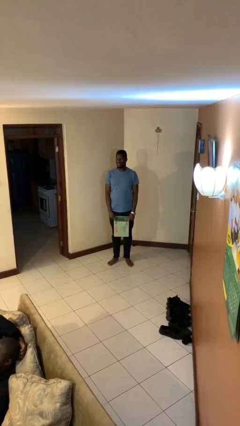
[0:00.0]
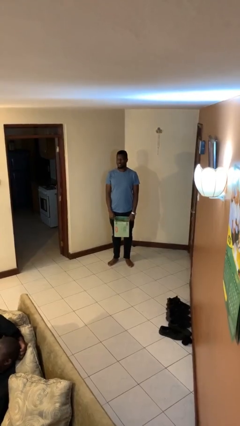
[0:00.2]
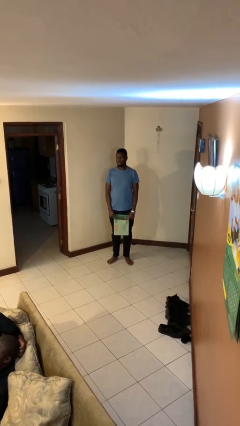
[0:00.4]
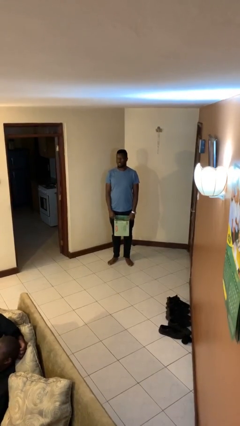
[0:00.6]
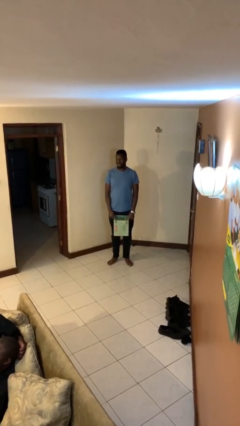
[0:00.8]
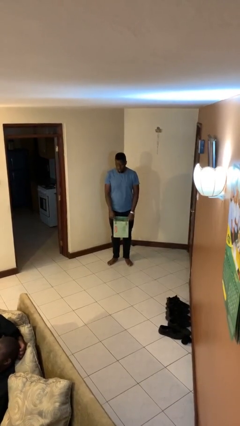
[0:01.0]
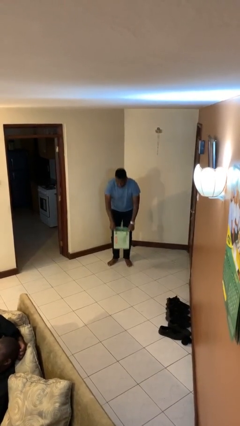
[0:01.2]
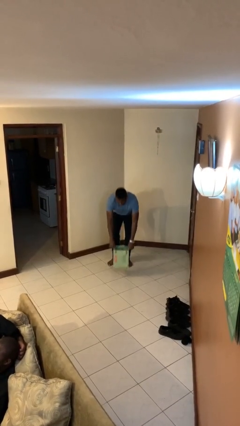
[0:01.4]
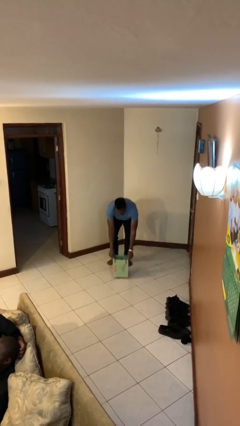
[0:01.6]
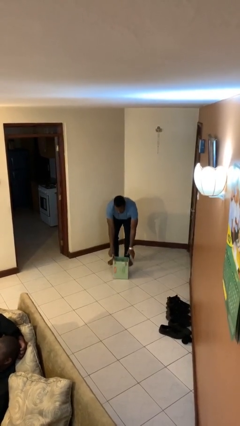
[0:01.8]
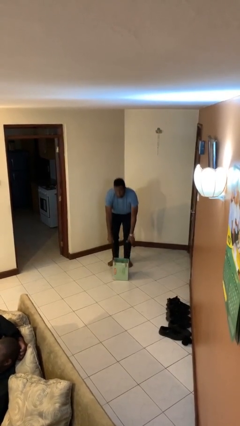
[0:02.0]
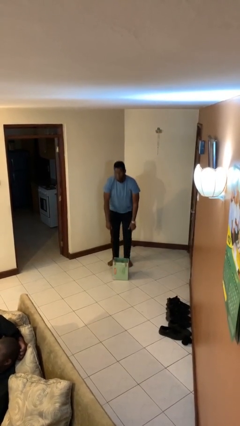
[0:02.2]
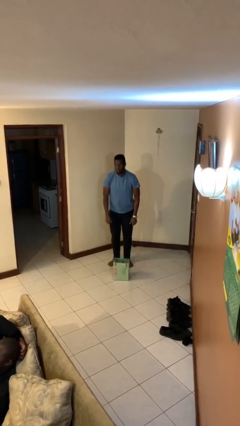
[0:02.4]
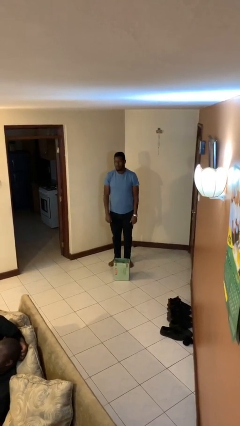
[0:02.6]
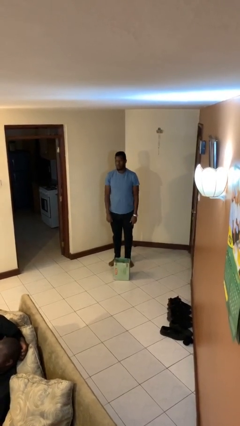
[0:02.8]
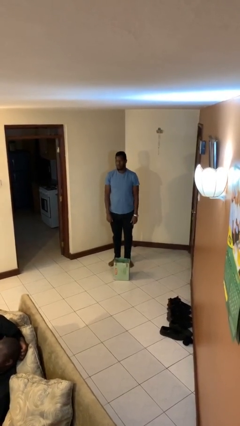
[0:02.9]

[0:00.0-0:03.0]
person puts down object on floor

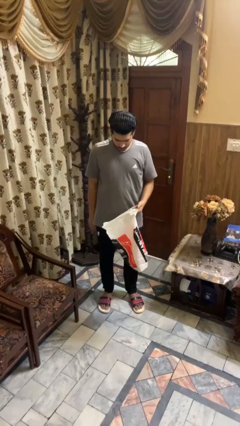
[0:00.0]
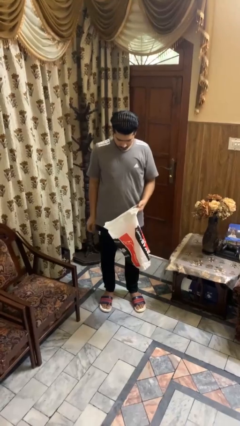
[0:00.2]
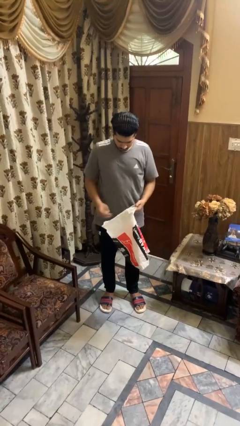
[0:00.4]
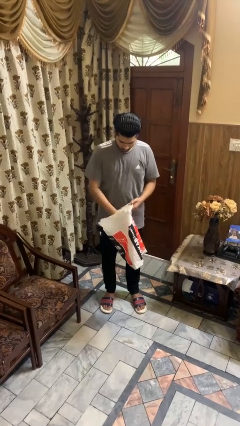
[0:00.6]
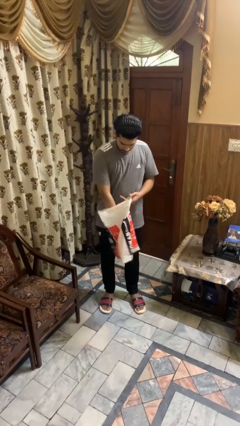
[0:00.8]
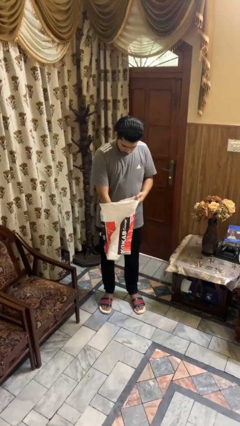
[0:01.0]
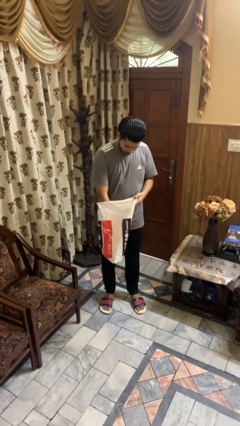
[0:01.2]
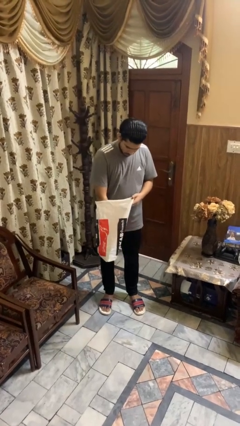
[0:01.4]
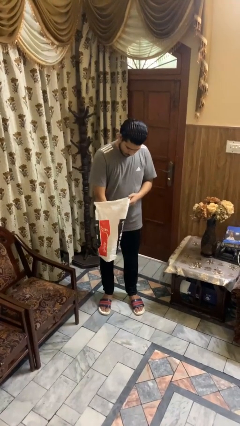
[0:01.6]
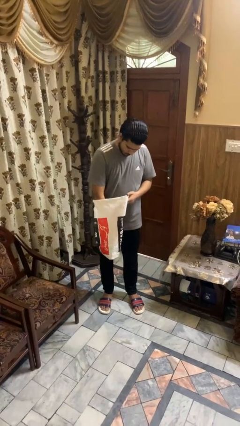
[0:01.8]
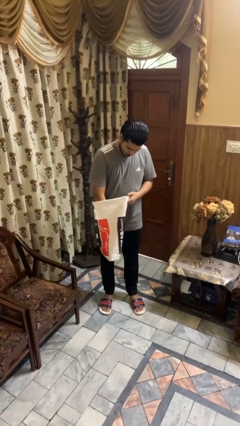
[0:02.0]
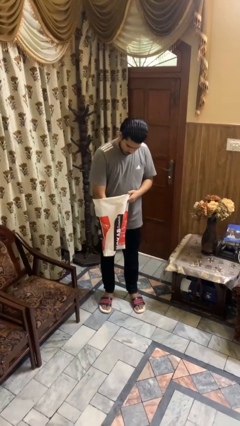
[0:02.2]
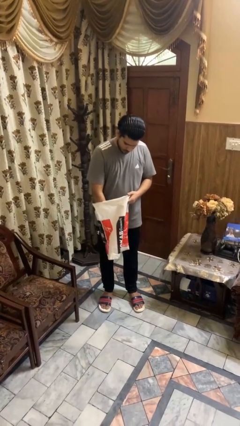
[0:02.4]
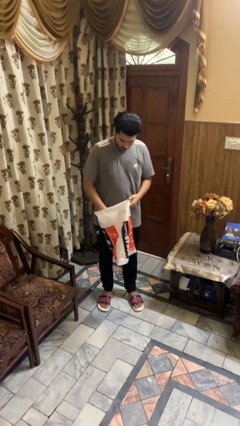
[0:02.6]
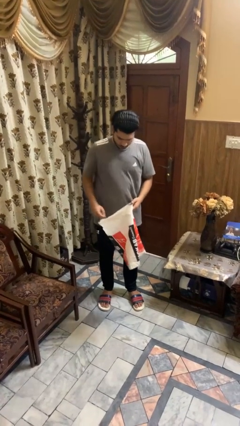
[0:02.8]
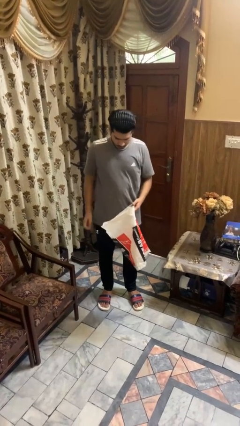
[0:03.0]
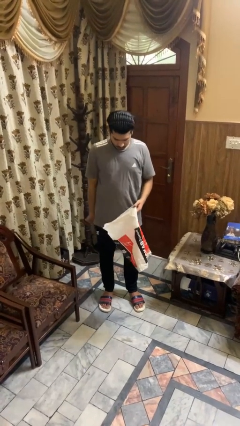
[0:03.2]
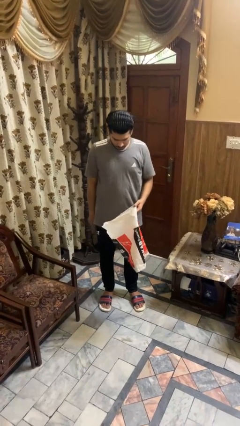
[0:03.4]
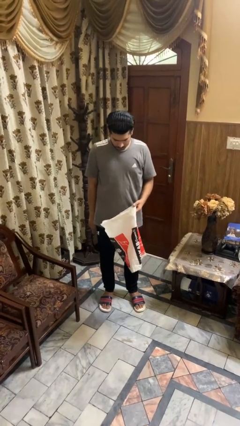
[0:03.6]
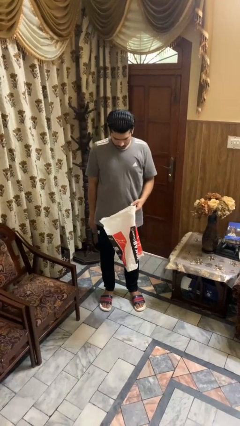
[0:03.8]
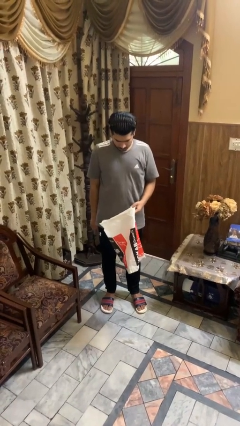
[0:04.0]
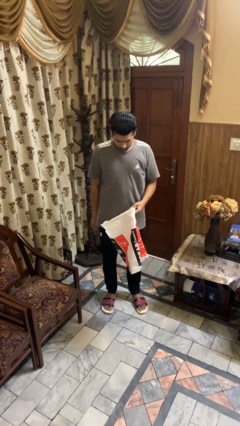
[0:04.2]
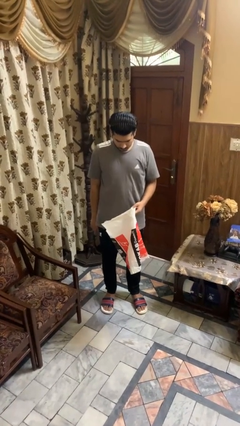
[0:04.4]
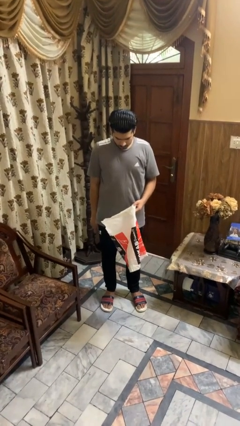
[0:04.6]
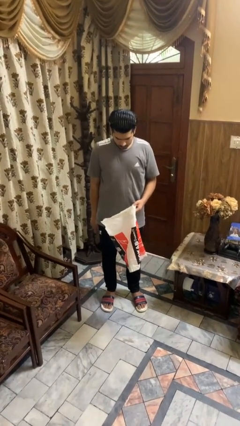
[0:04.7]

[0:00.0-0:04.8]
person searches in bag

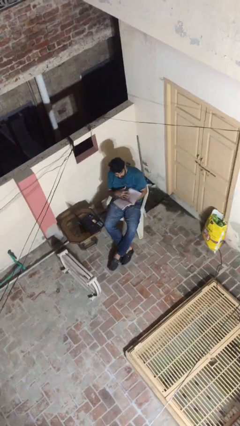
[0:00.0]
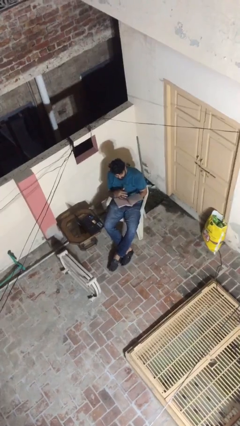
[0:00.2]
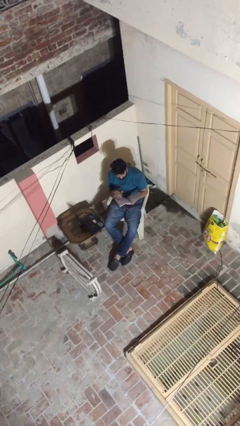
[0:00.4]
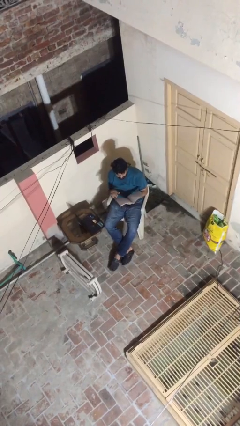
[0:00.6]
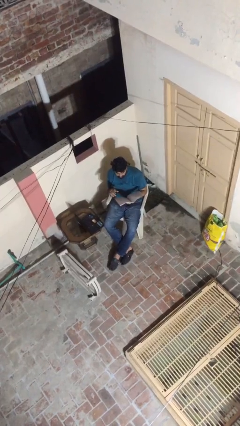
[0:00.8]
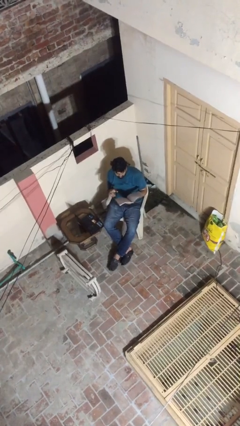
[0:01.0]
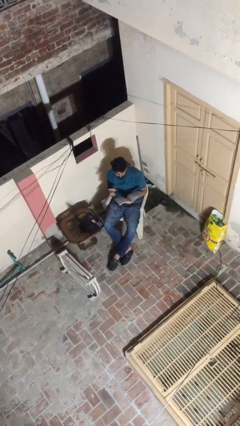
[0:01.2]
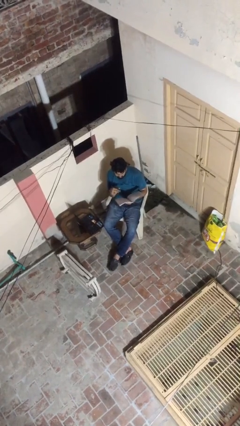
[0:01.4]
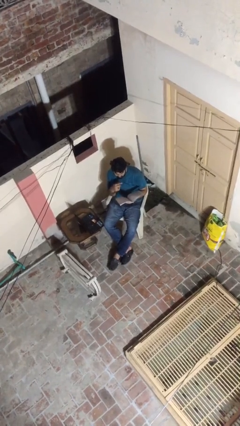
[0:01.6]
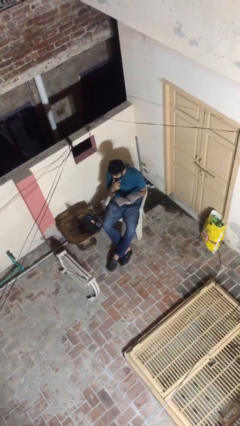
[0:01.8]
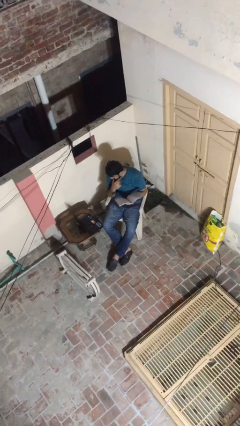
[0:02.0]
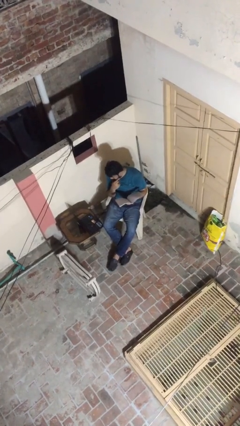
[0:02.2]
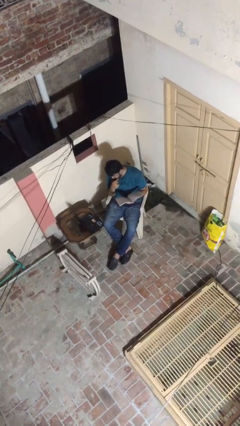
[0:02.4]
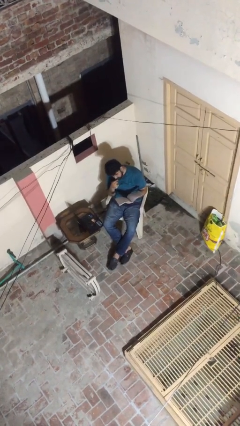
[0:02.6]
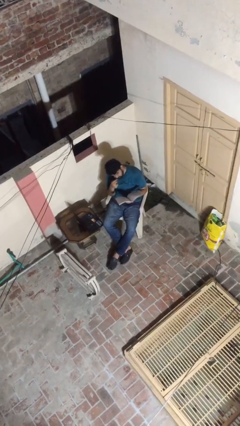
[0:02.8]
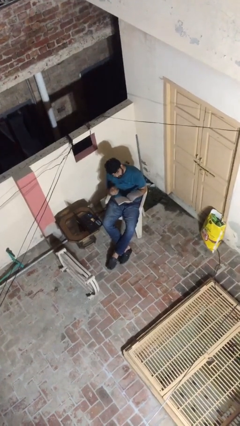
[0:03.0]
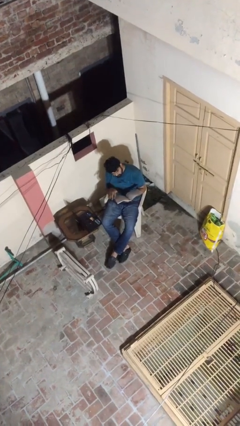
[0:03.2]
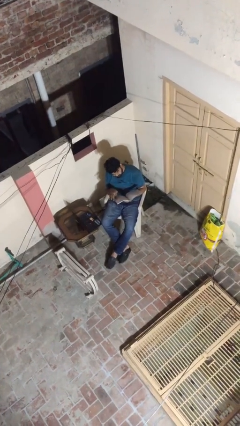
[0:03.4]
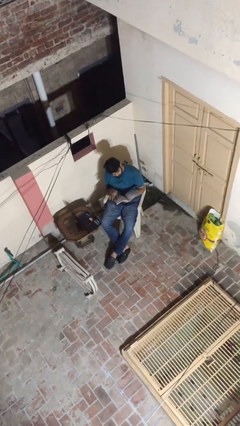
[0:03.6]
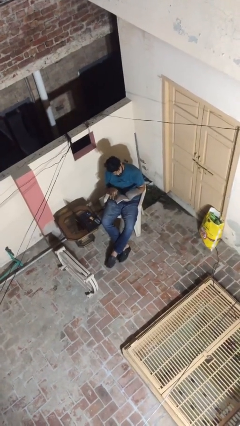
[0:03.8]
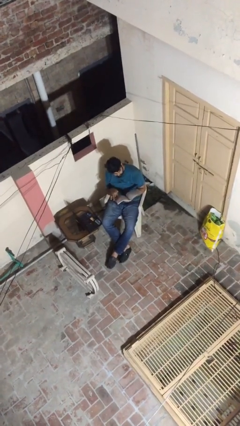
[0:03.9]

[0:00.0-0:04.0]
person reads document

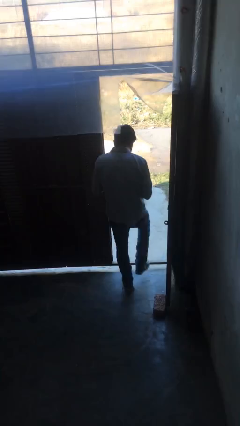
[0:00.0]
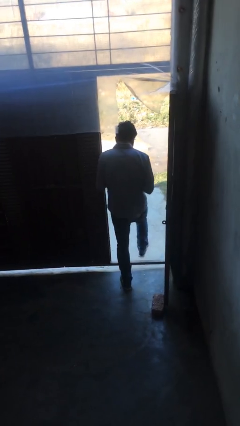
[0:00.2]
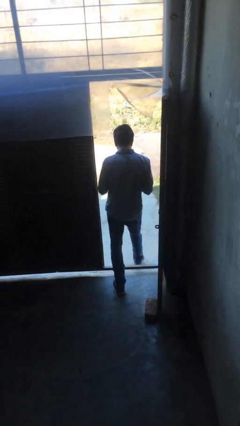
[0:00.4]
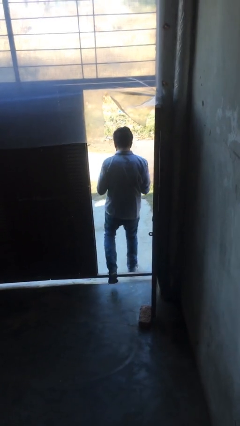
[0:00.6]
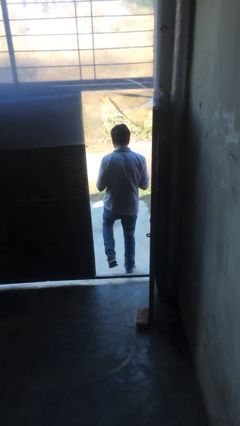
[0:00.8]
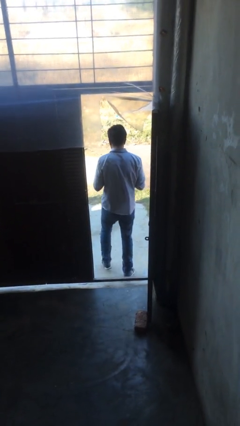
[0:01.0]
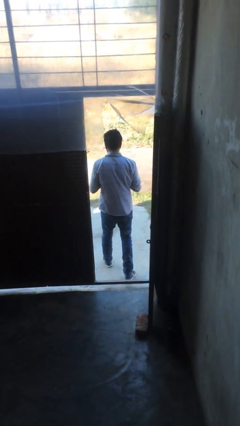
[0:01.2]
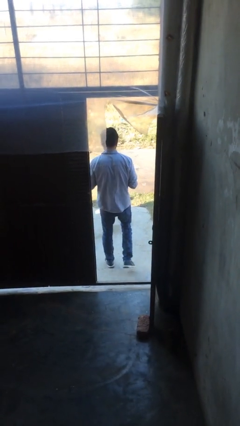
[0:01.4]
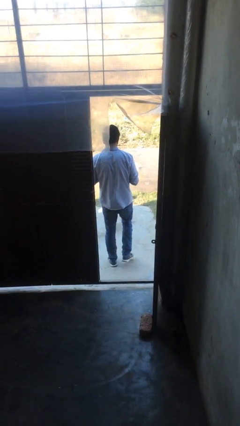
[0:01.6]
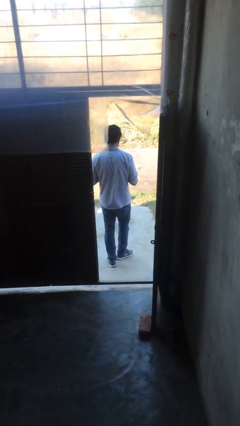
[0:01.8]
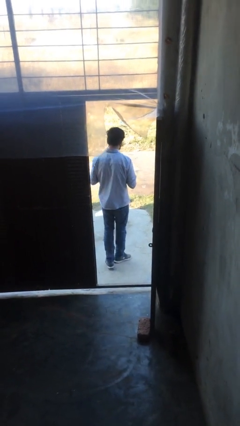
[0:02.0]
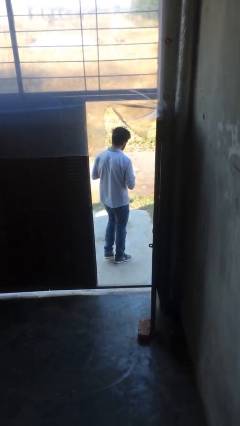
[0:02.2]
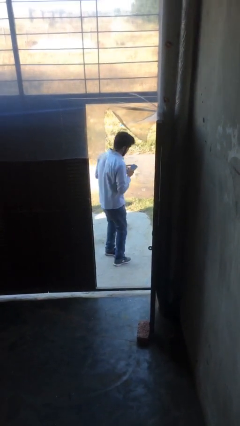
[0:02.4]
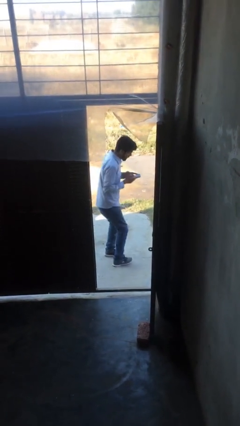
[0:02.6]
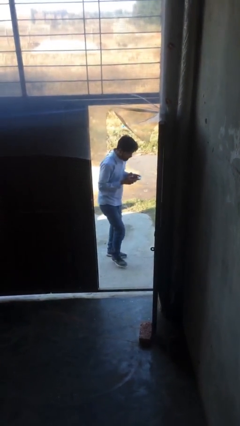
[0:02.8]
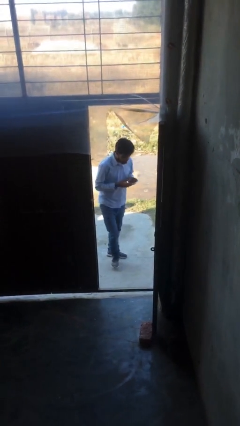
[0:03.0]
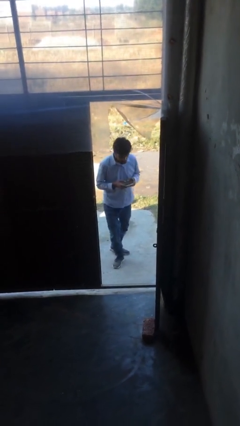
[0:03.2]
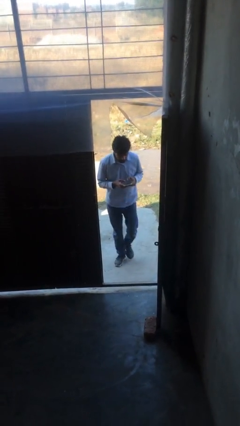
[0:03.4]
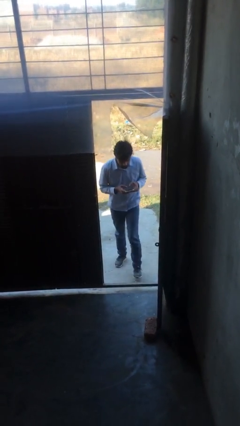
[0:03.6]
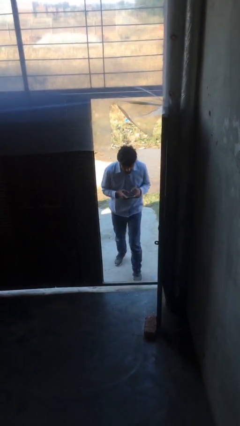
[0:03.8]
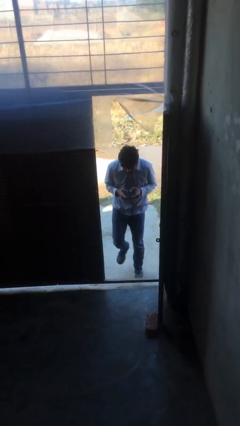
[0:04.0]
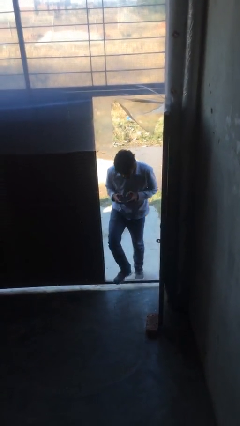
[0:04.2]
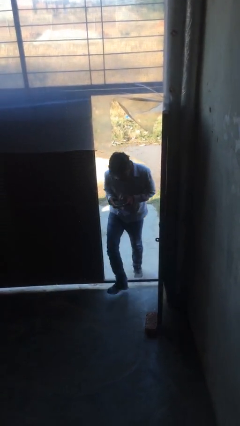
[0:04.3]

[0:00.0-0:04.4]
person exits scene through structure

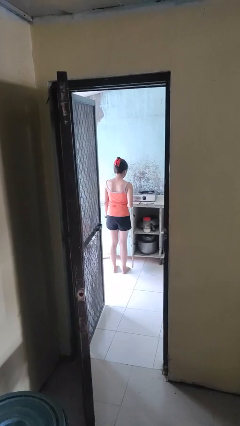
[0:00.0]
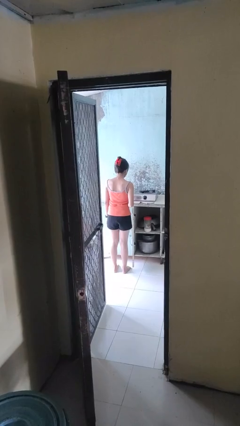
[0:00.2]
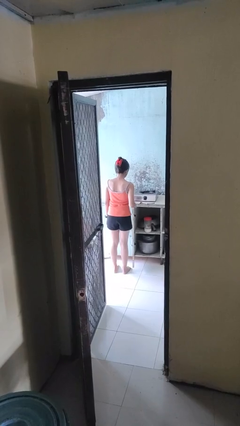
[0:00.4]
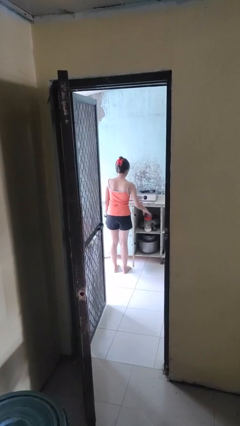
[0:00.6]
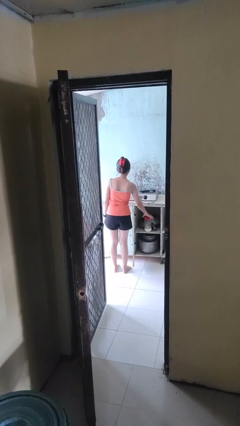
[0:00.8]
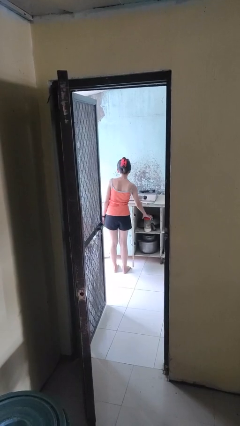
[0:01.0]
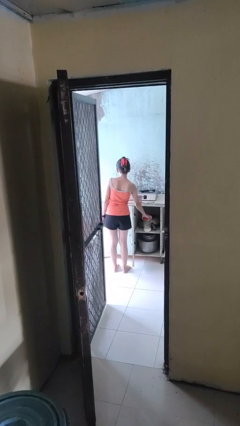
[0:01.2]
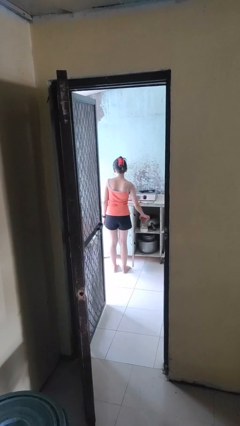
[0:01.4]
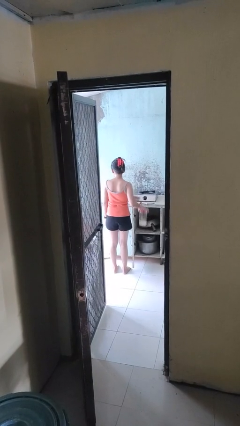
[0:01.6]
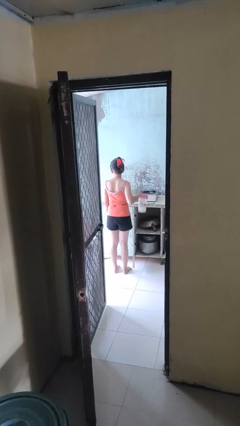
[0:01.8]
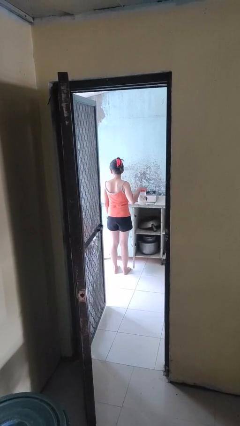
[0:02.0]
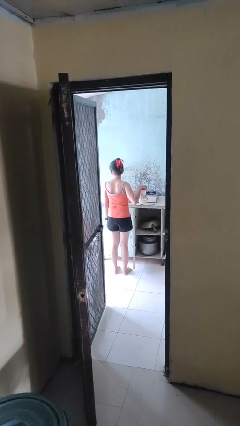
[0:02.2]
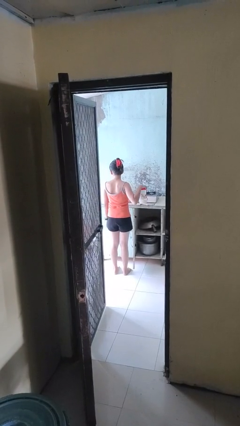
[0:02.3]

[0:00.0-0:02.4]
person picks up object from cabinet
